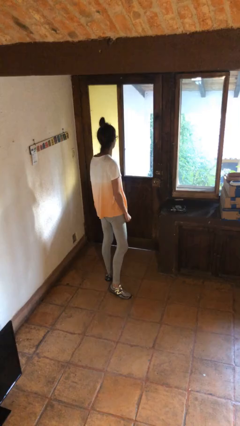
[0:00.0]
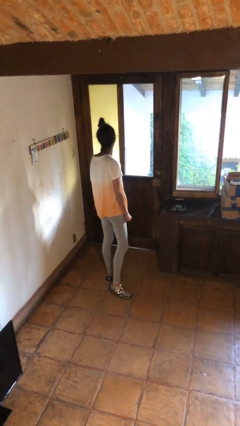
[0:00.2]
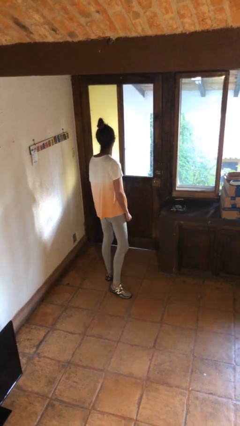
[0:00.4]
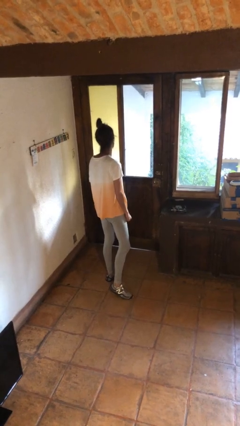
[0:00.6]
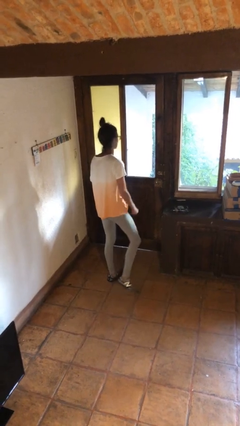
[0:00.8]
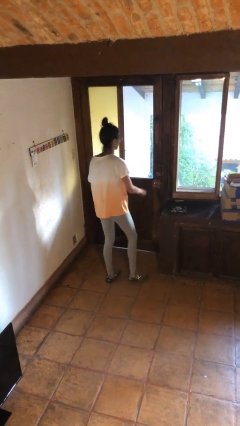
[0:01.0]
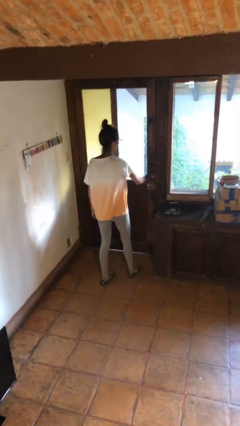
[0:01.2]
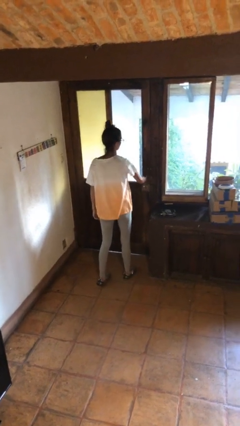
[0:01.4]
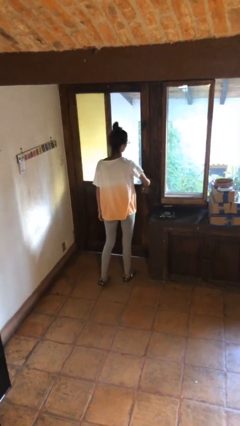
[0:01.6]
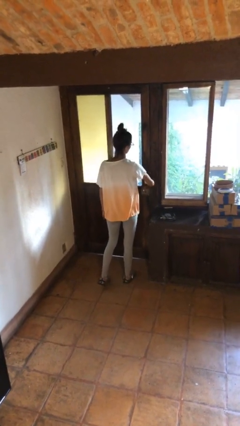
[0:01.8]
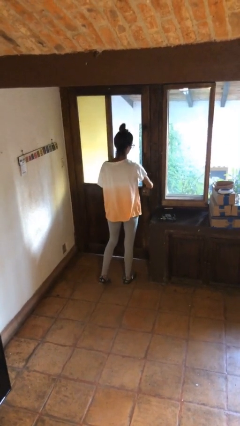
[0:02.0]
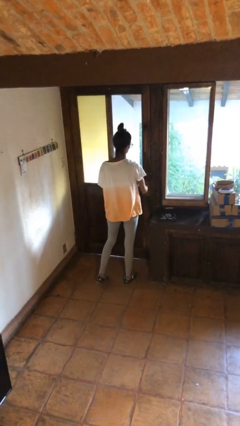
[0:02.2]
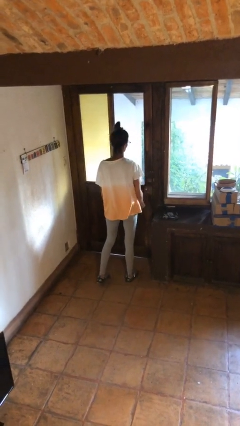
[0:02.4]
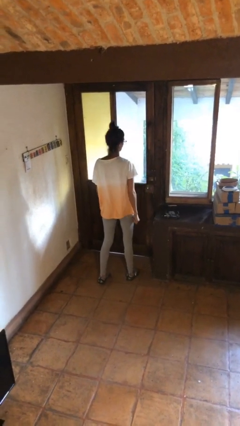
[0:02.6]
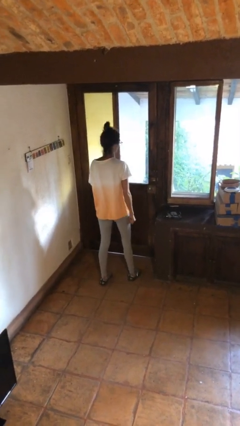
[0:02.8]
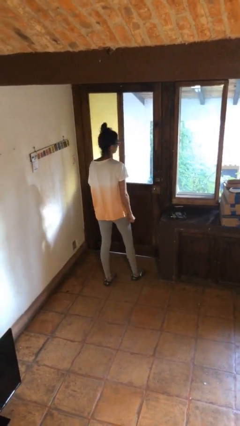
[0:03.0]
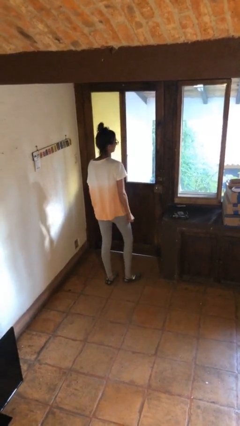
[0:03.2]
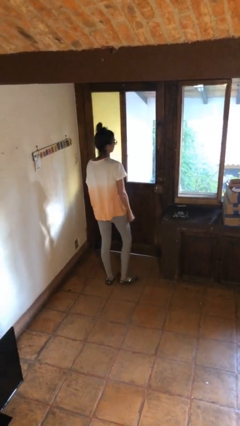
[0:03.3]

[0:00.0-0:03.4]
person unlocks door with keys

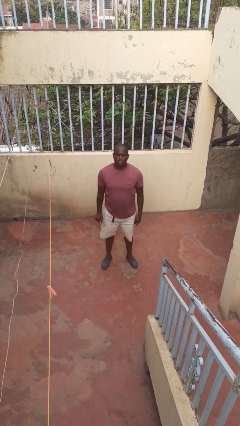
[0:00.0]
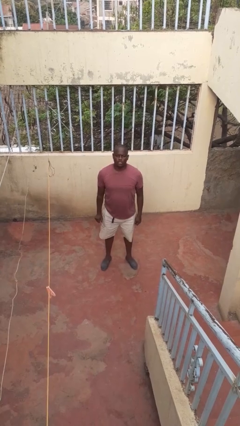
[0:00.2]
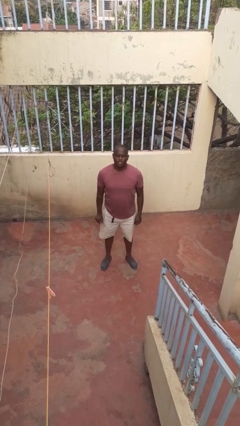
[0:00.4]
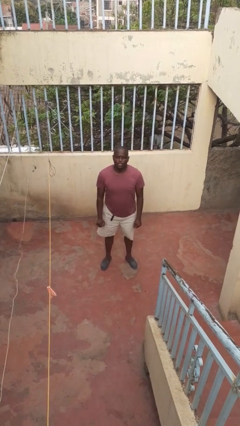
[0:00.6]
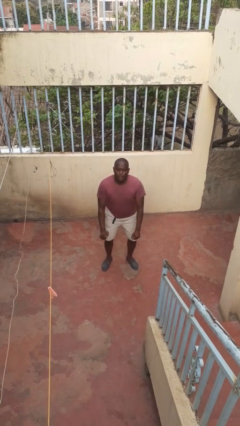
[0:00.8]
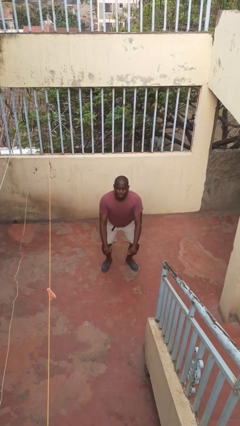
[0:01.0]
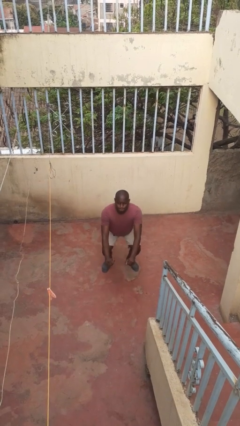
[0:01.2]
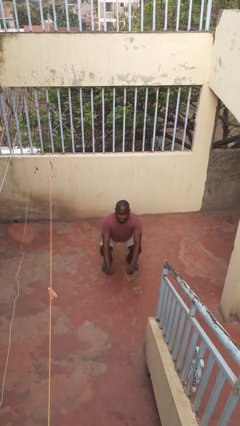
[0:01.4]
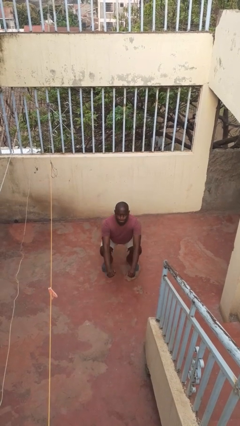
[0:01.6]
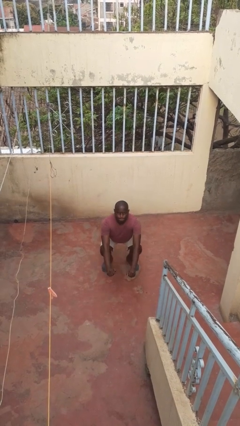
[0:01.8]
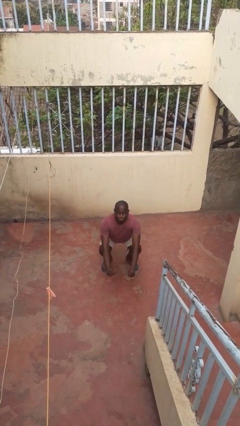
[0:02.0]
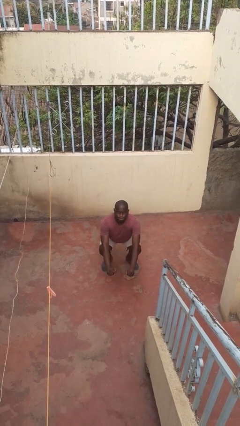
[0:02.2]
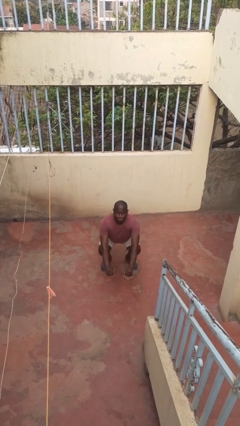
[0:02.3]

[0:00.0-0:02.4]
person squats

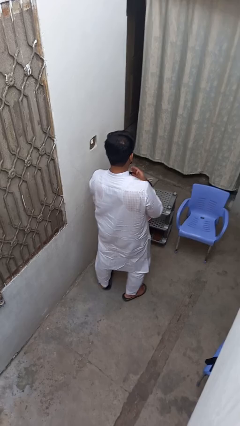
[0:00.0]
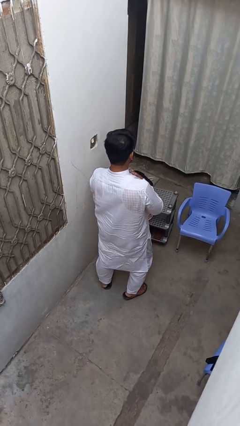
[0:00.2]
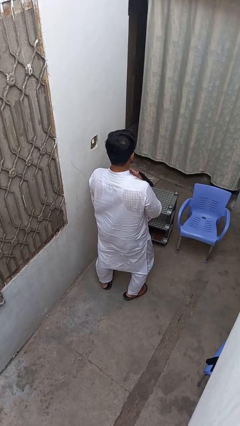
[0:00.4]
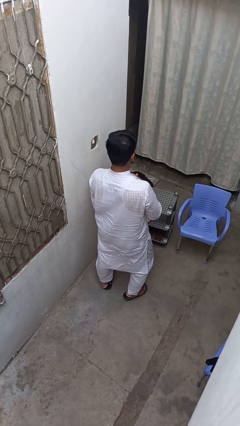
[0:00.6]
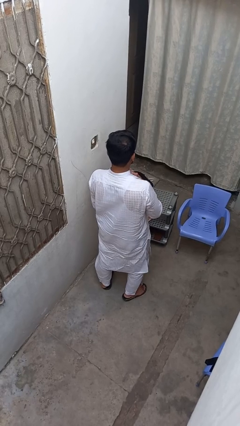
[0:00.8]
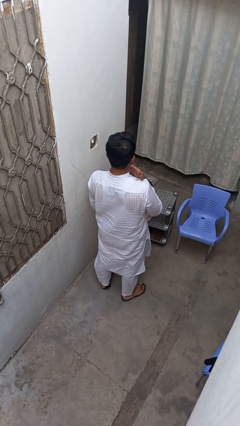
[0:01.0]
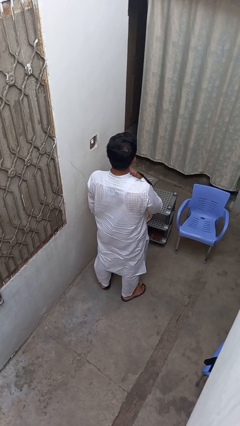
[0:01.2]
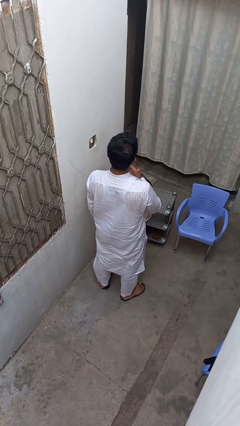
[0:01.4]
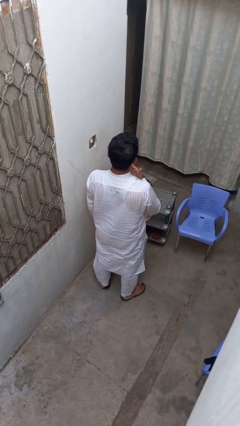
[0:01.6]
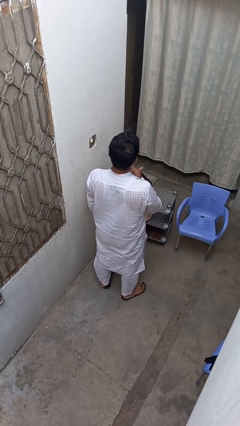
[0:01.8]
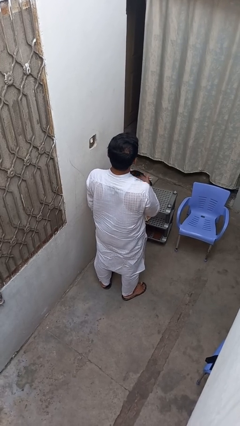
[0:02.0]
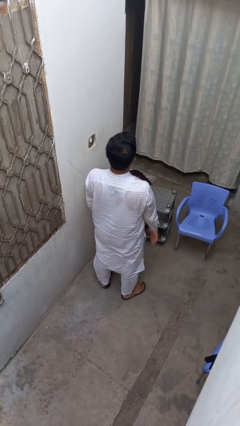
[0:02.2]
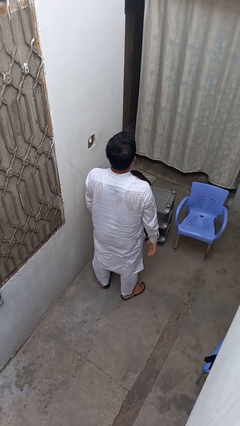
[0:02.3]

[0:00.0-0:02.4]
person drums on chest

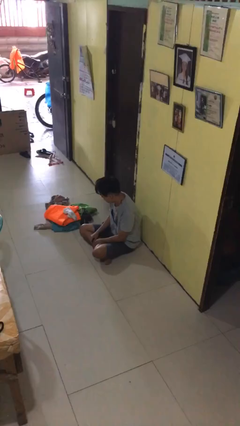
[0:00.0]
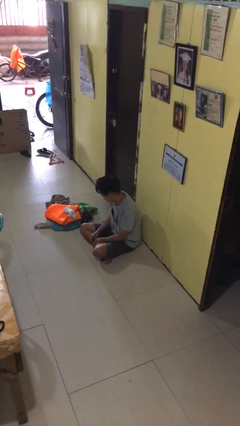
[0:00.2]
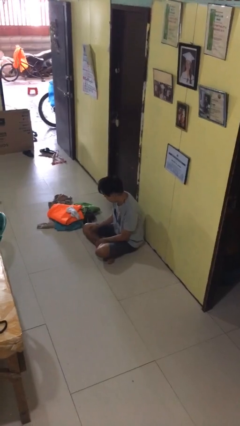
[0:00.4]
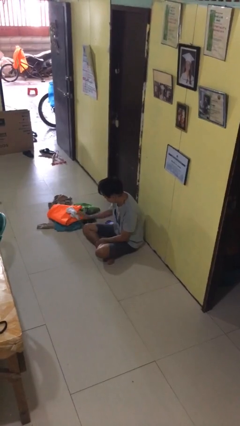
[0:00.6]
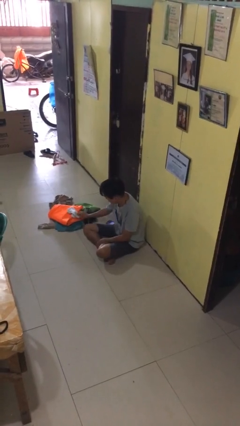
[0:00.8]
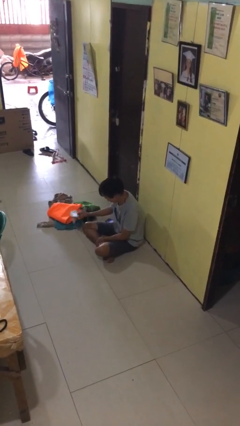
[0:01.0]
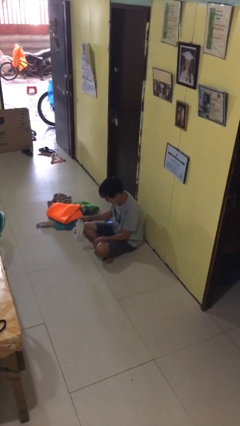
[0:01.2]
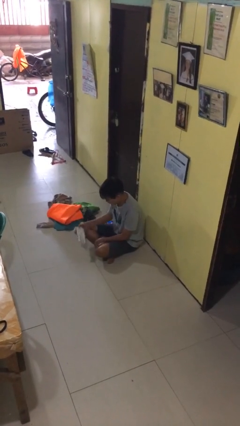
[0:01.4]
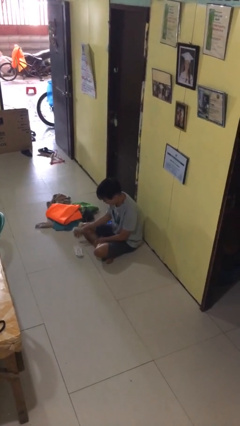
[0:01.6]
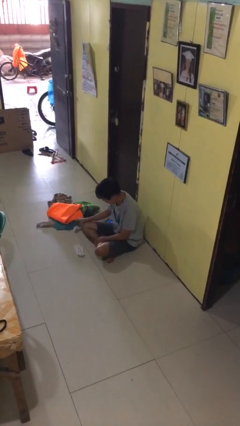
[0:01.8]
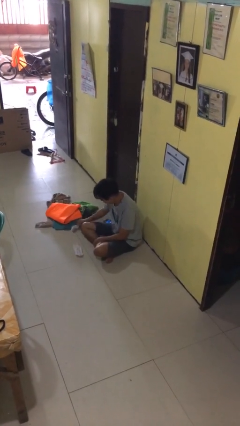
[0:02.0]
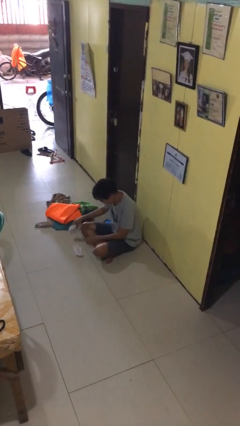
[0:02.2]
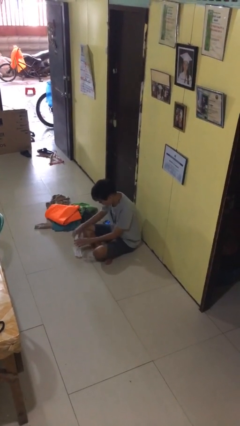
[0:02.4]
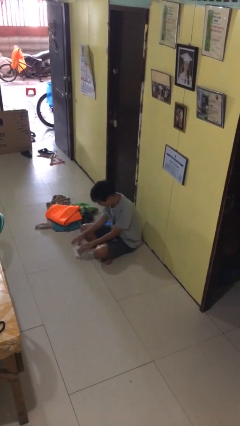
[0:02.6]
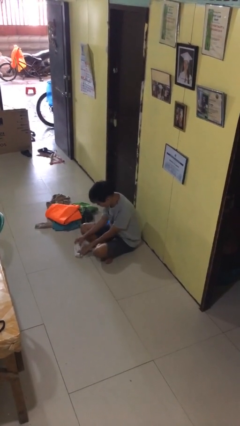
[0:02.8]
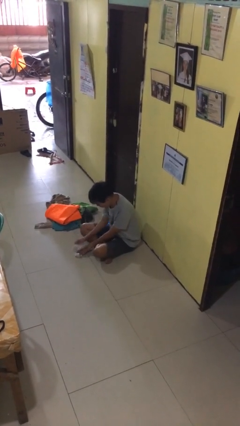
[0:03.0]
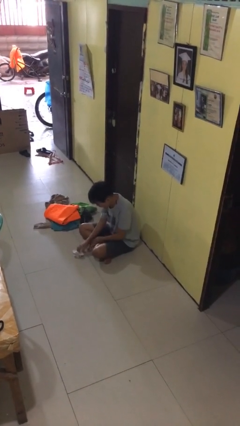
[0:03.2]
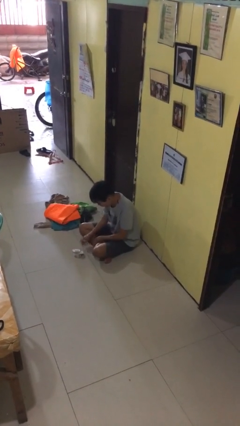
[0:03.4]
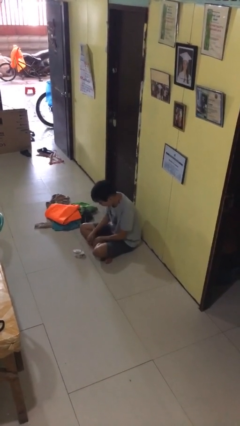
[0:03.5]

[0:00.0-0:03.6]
person folds socks

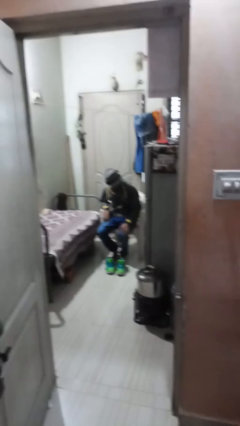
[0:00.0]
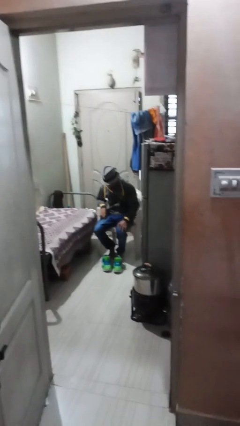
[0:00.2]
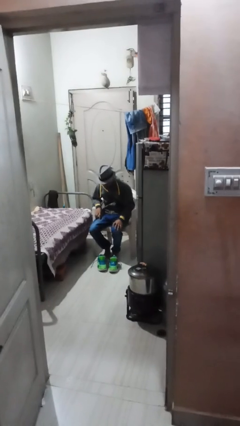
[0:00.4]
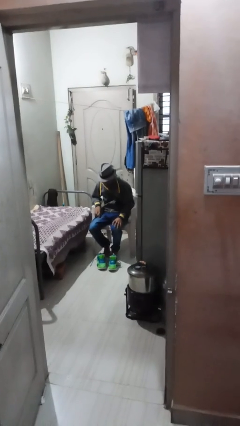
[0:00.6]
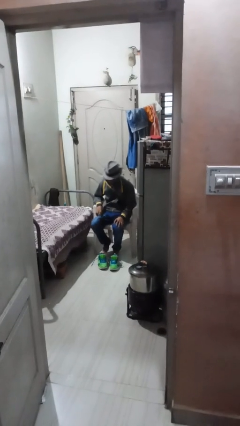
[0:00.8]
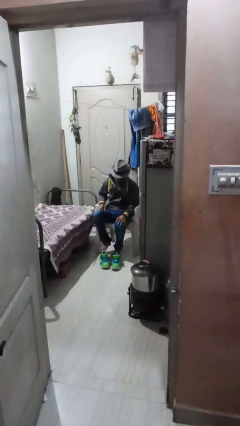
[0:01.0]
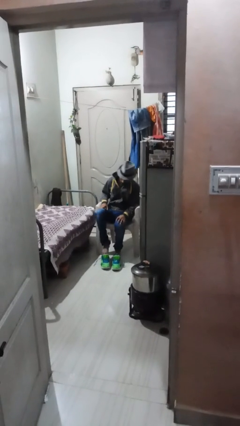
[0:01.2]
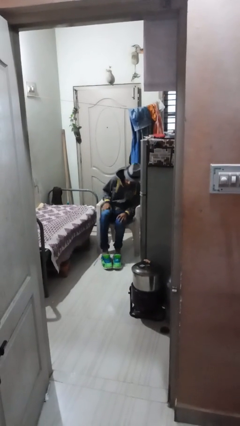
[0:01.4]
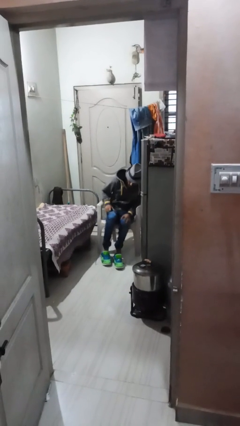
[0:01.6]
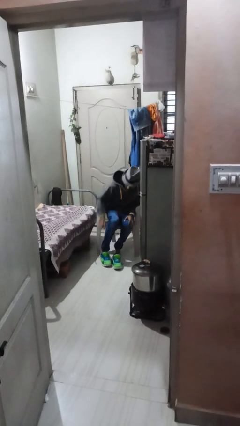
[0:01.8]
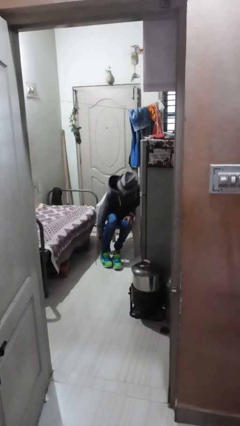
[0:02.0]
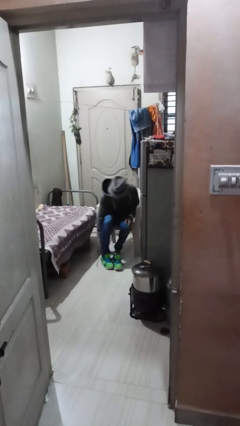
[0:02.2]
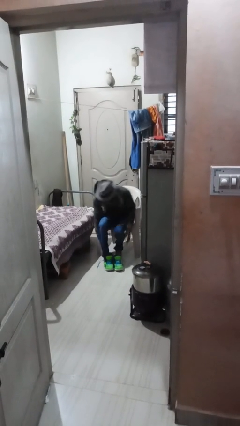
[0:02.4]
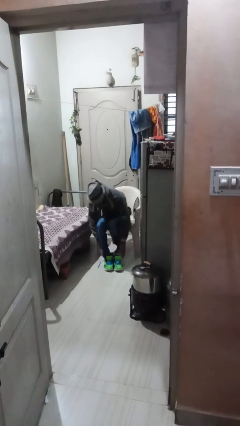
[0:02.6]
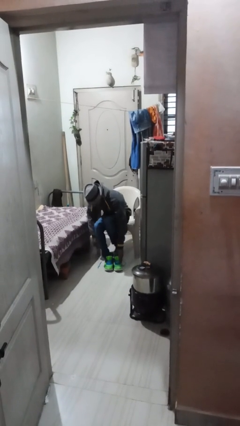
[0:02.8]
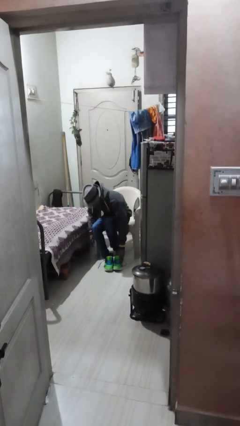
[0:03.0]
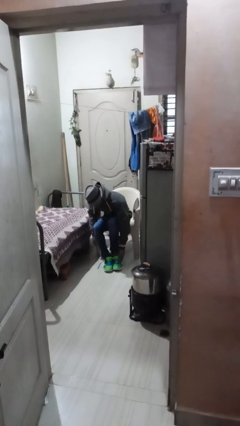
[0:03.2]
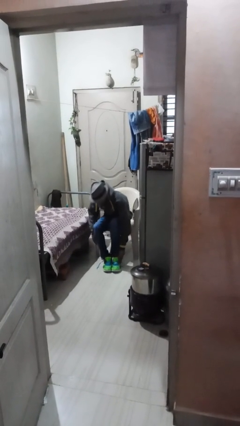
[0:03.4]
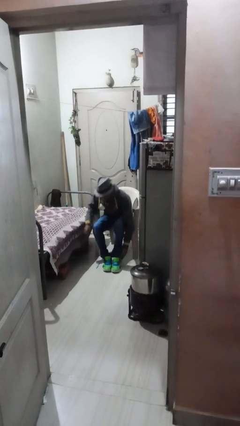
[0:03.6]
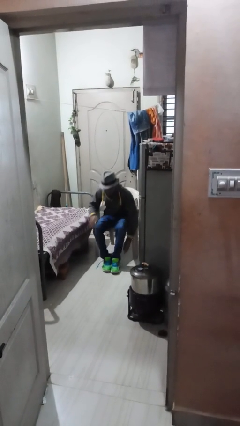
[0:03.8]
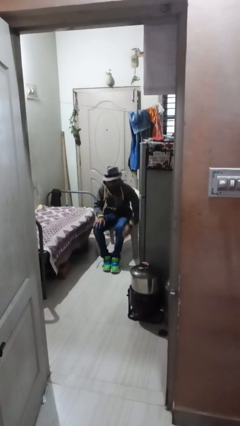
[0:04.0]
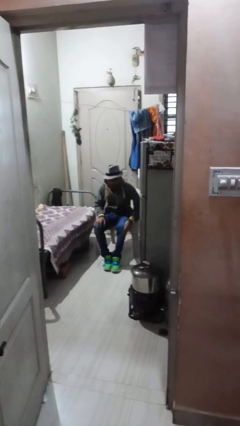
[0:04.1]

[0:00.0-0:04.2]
person puts on shoes

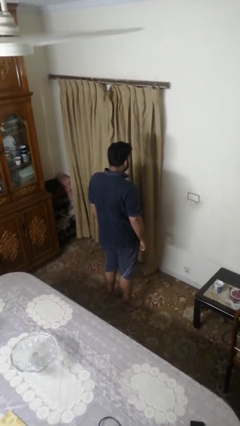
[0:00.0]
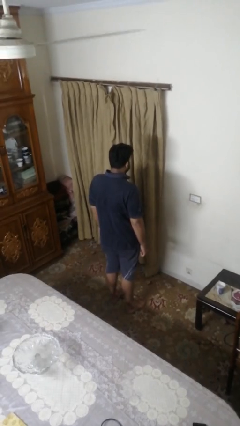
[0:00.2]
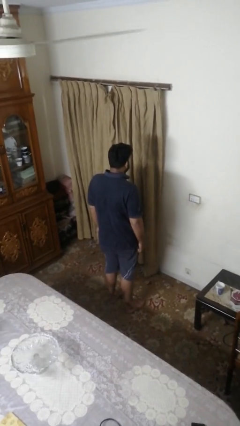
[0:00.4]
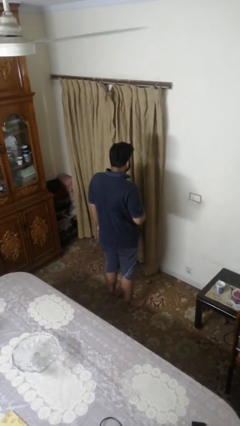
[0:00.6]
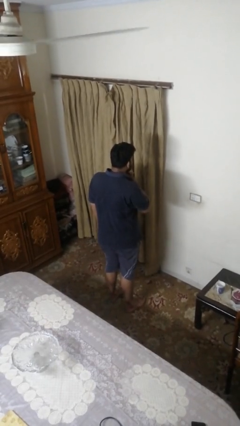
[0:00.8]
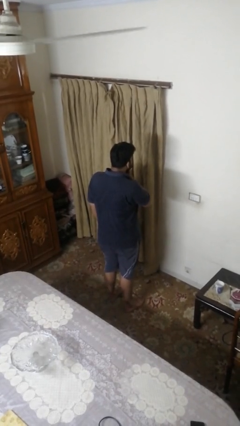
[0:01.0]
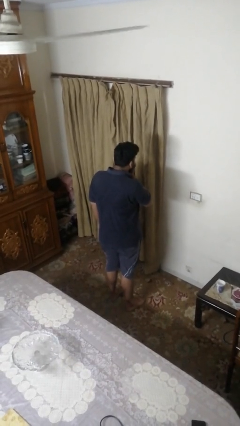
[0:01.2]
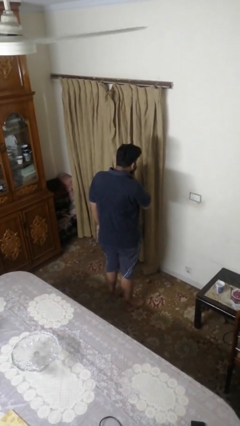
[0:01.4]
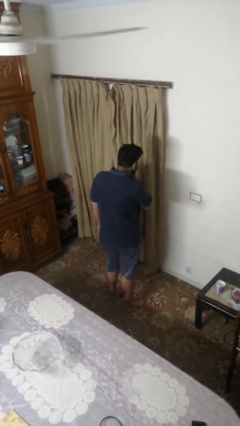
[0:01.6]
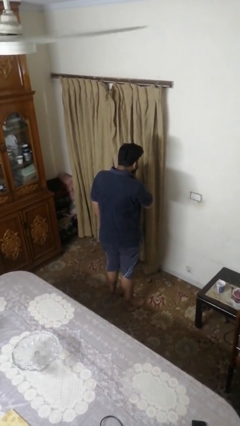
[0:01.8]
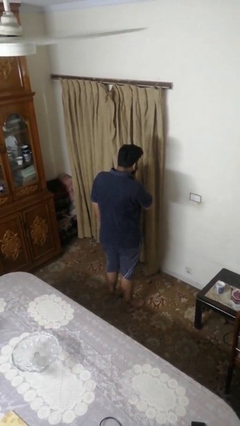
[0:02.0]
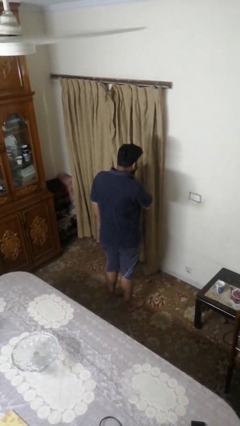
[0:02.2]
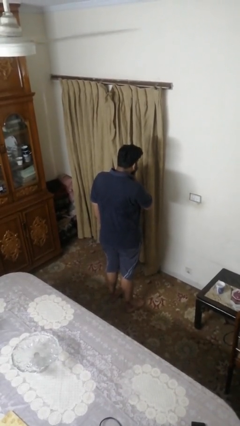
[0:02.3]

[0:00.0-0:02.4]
person strokes chin
